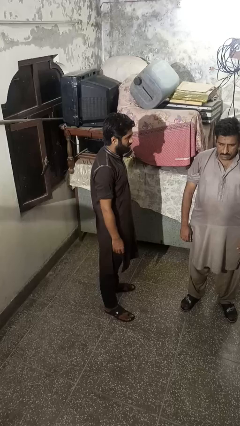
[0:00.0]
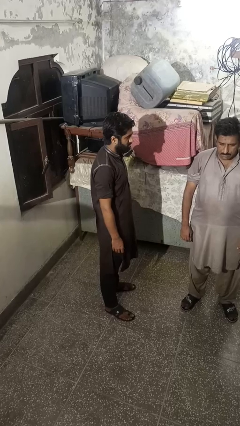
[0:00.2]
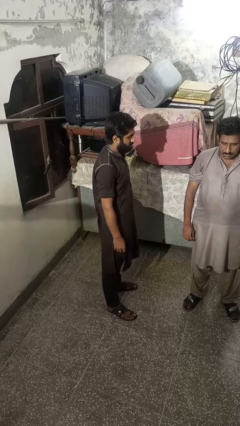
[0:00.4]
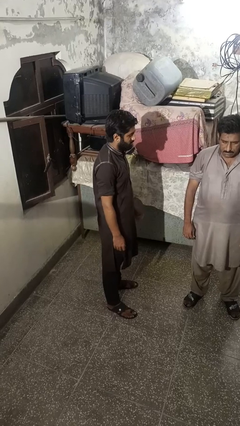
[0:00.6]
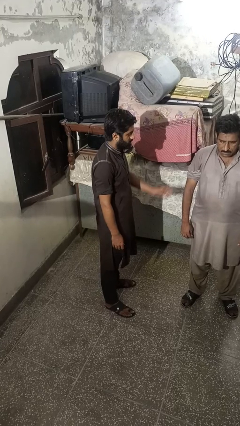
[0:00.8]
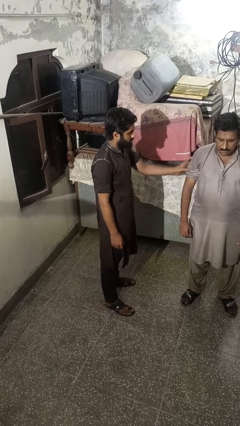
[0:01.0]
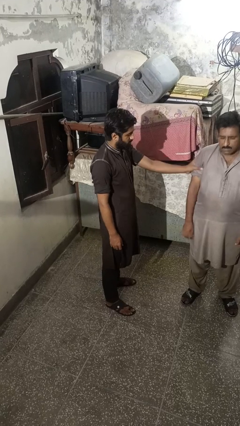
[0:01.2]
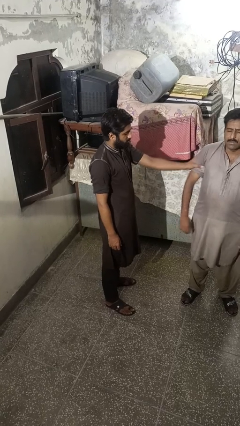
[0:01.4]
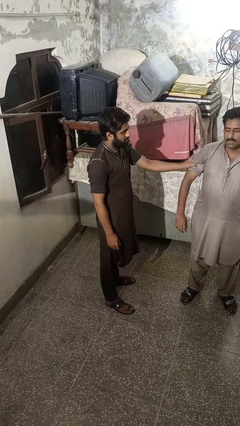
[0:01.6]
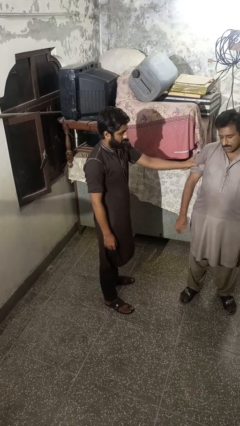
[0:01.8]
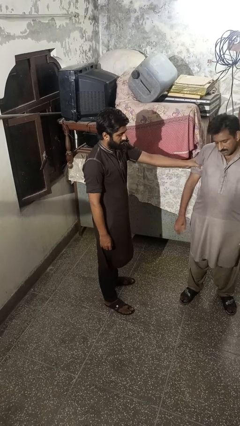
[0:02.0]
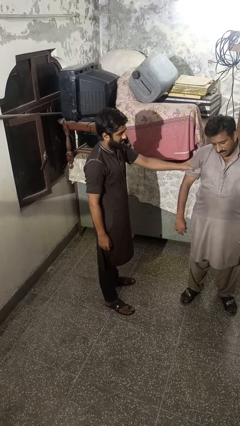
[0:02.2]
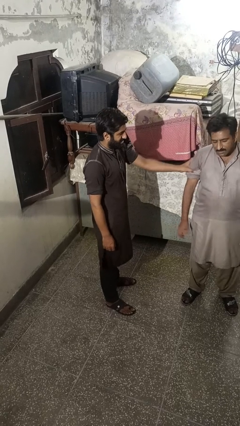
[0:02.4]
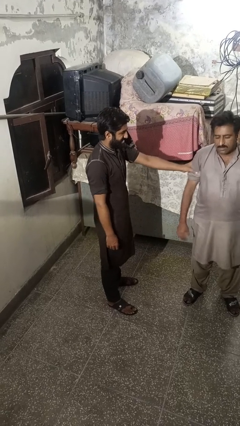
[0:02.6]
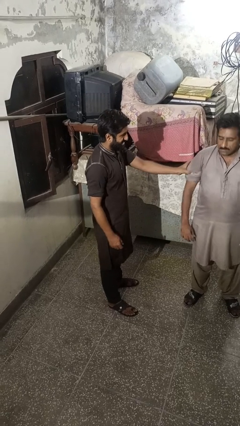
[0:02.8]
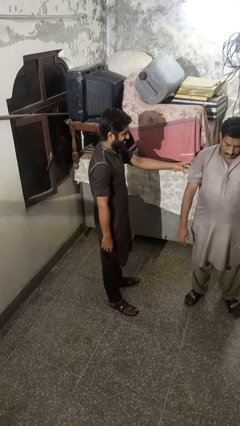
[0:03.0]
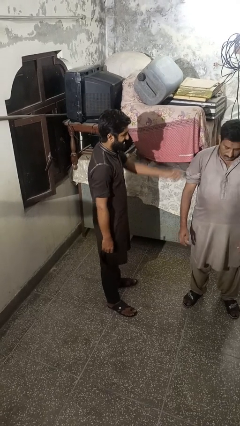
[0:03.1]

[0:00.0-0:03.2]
person grabs person by bicep

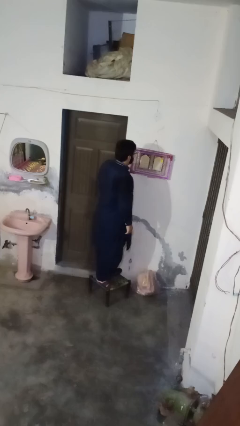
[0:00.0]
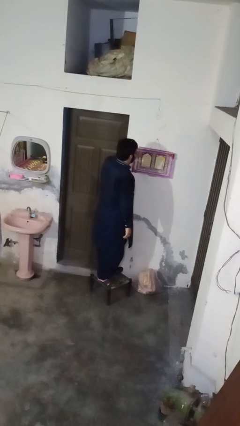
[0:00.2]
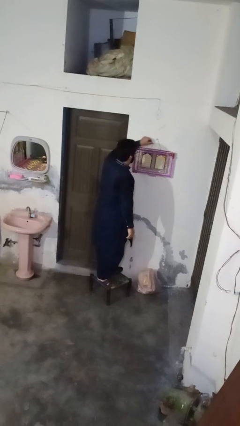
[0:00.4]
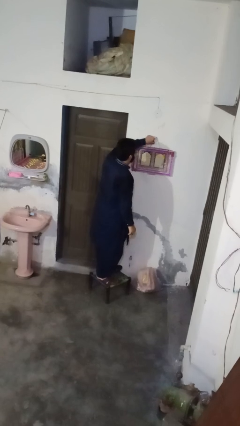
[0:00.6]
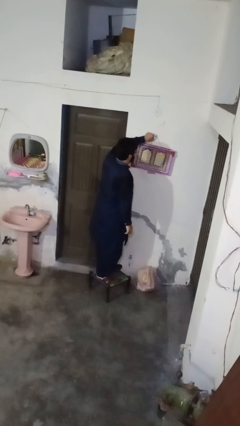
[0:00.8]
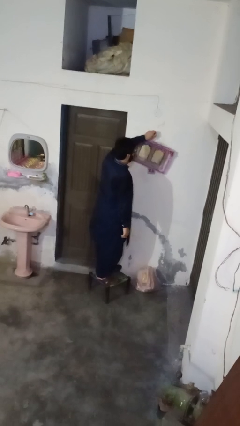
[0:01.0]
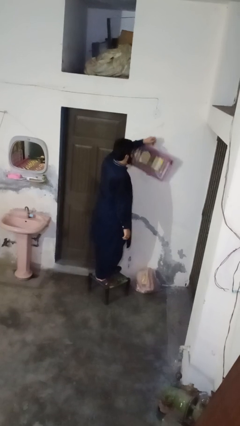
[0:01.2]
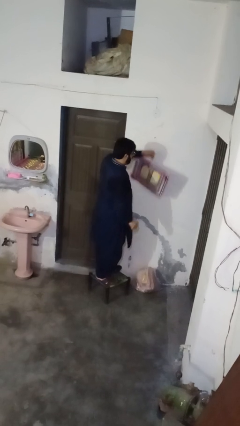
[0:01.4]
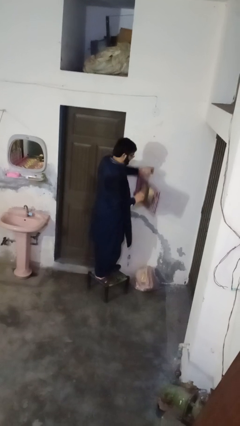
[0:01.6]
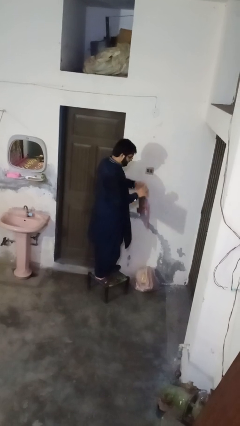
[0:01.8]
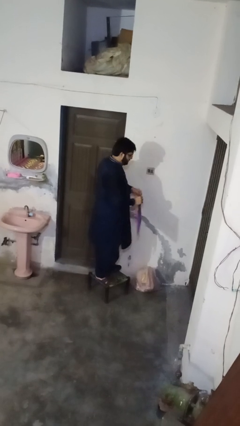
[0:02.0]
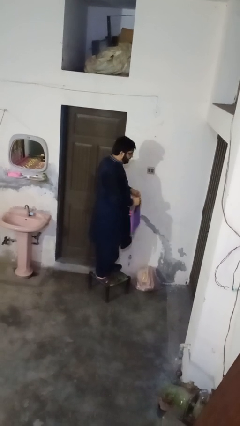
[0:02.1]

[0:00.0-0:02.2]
person takes down picture frame

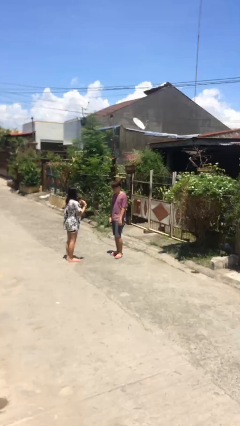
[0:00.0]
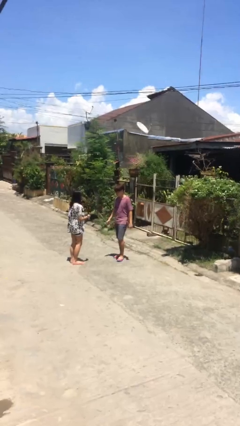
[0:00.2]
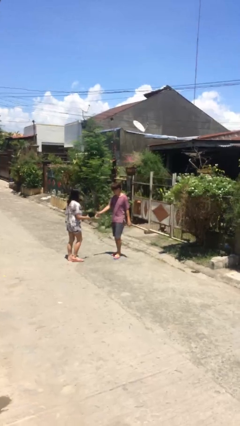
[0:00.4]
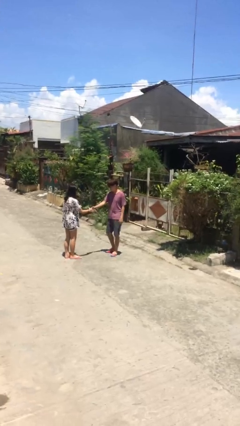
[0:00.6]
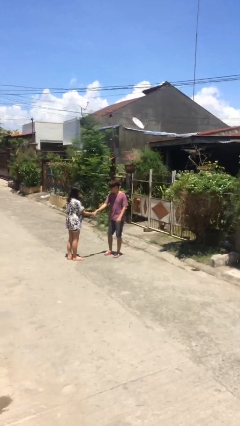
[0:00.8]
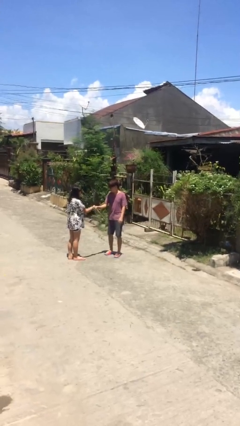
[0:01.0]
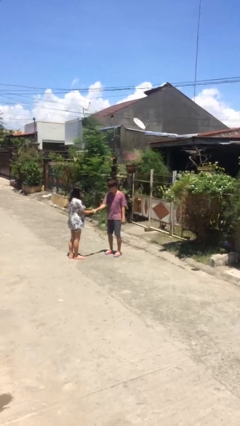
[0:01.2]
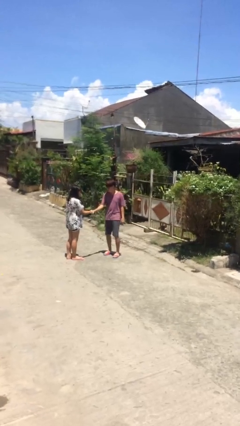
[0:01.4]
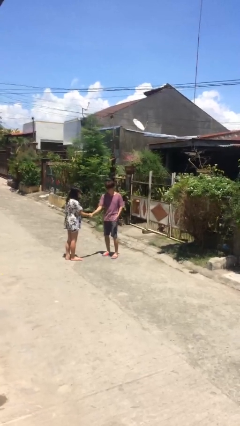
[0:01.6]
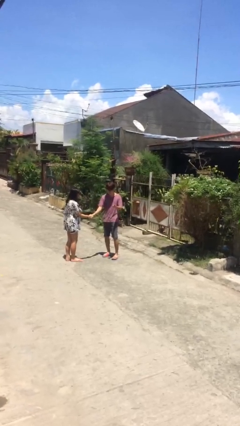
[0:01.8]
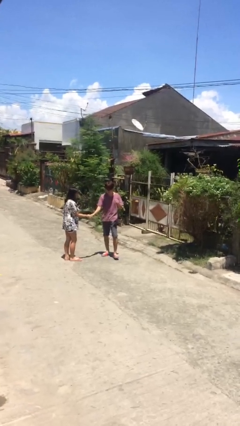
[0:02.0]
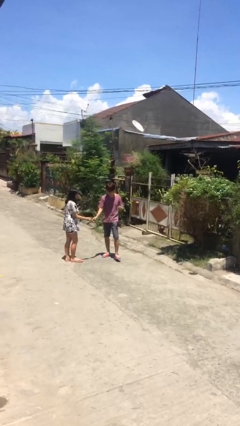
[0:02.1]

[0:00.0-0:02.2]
person shakes hand

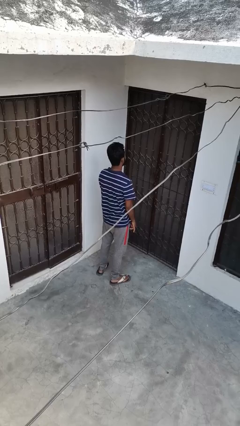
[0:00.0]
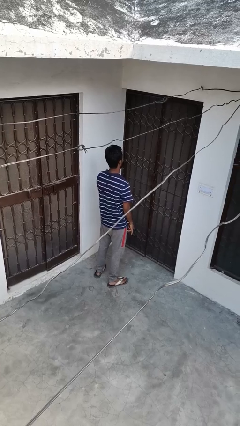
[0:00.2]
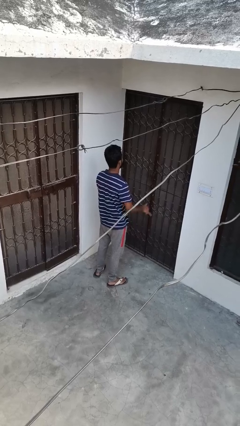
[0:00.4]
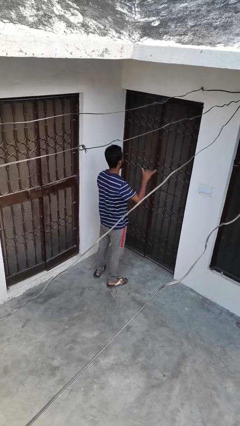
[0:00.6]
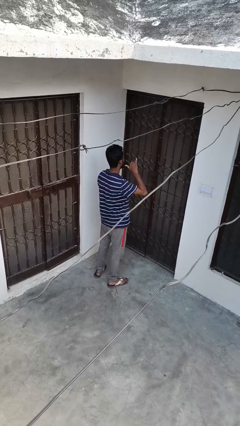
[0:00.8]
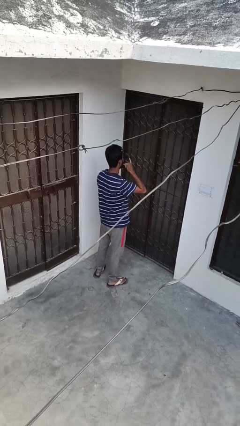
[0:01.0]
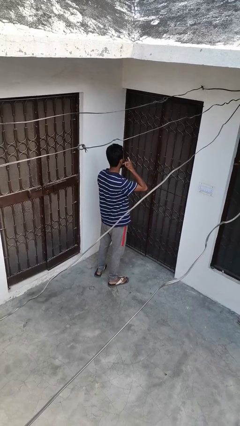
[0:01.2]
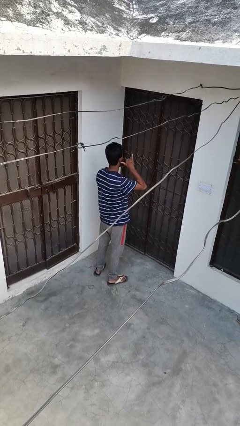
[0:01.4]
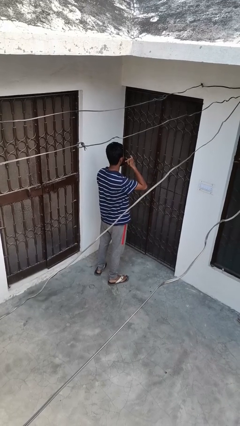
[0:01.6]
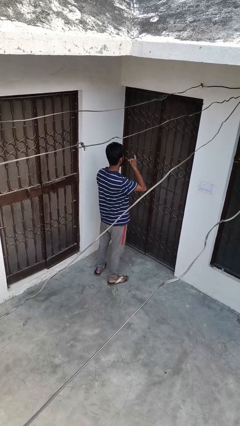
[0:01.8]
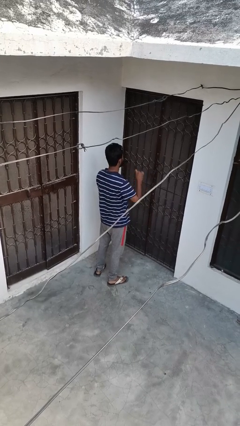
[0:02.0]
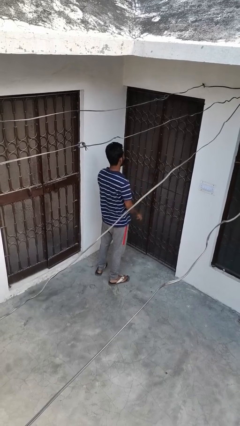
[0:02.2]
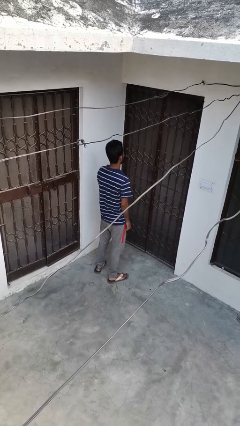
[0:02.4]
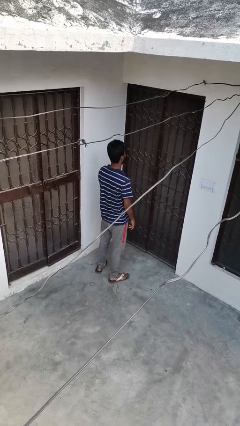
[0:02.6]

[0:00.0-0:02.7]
person gestures hang loose

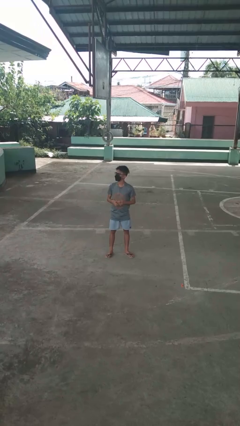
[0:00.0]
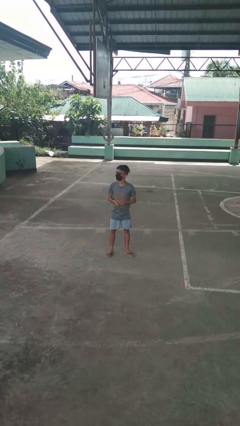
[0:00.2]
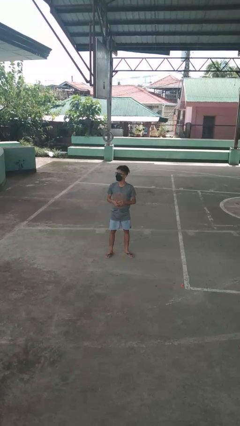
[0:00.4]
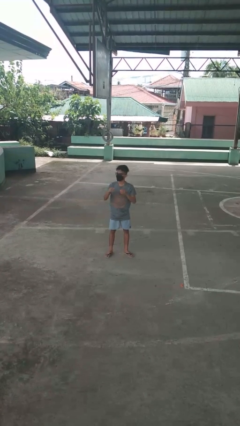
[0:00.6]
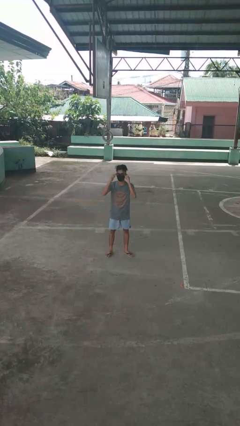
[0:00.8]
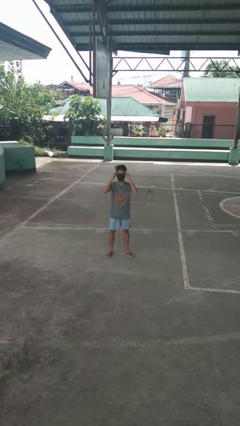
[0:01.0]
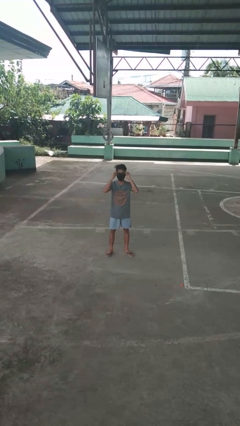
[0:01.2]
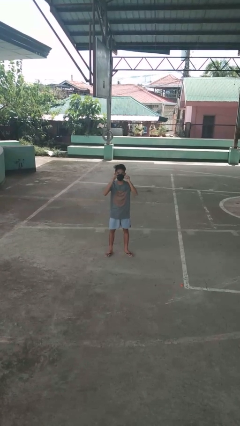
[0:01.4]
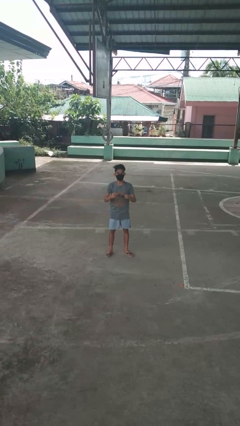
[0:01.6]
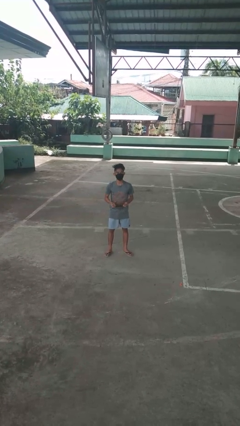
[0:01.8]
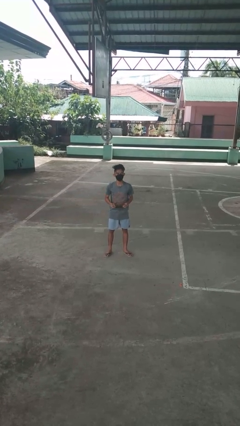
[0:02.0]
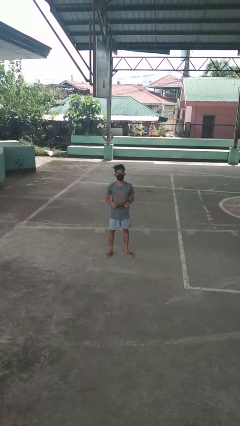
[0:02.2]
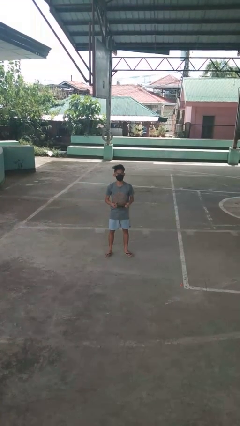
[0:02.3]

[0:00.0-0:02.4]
person takes off glasses

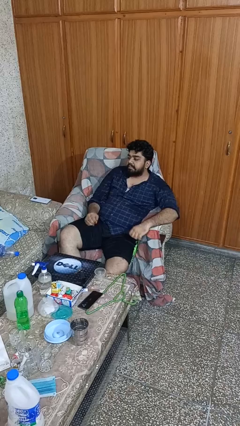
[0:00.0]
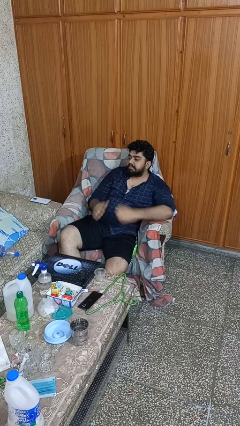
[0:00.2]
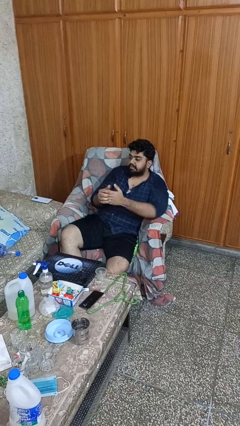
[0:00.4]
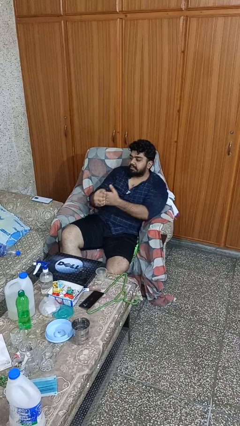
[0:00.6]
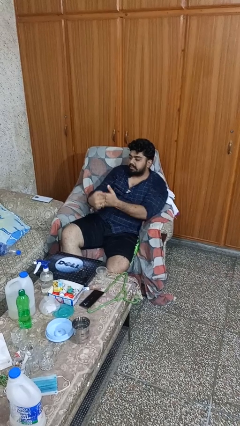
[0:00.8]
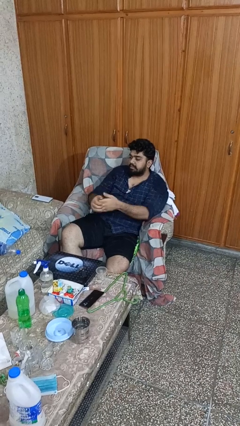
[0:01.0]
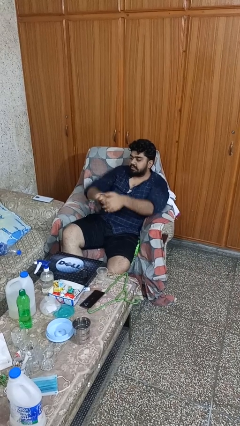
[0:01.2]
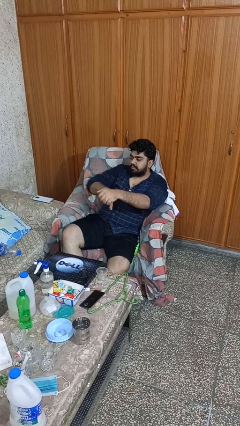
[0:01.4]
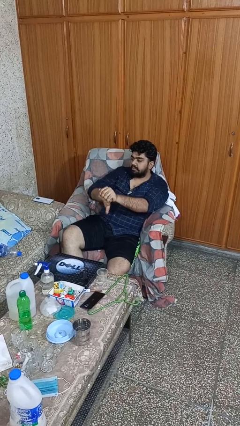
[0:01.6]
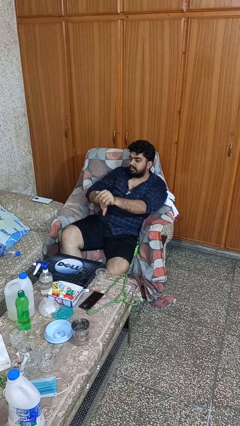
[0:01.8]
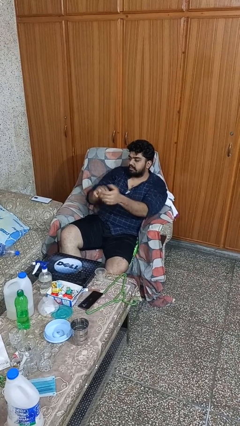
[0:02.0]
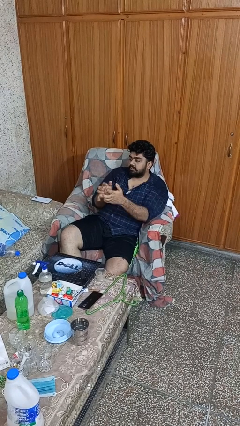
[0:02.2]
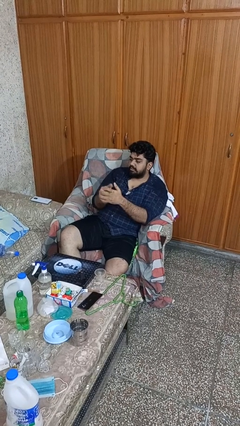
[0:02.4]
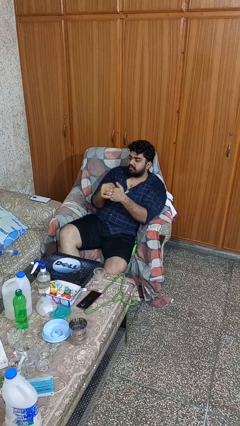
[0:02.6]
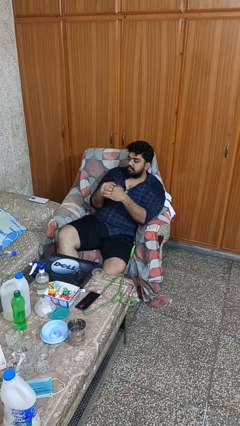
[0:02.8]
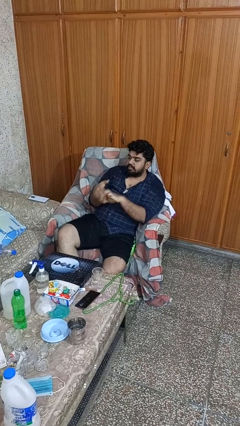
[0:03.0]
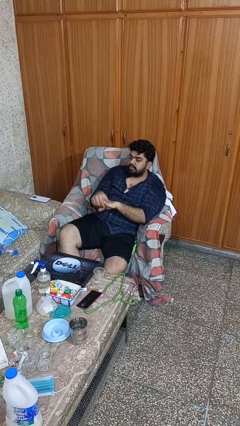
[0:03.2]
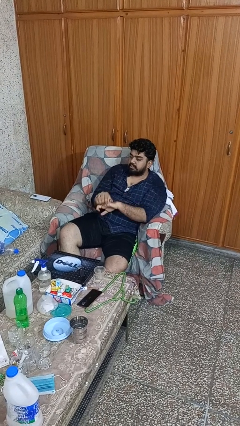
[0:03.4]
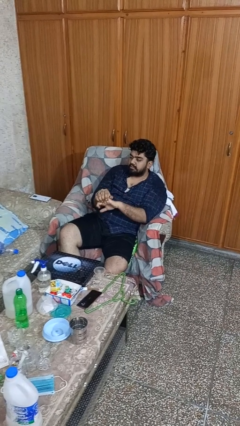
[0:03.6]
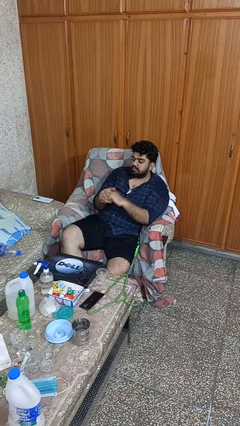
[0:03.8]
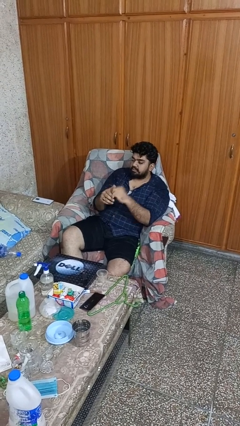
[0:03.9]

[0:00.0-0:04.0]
person cracks knuckles

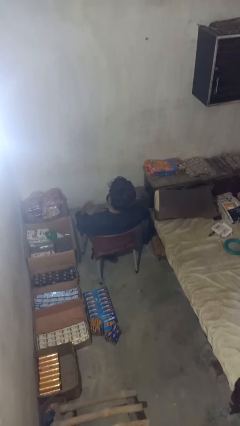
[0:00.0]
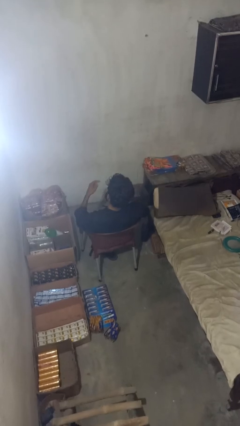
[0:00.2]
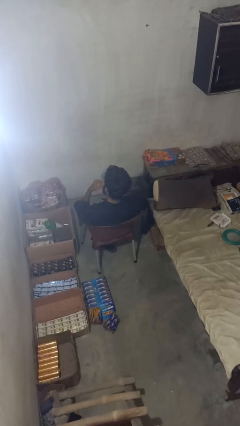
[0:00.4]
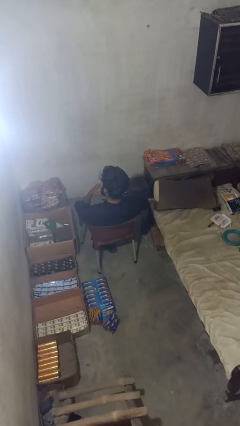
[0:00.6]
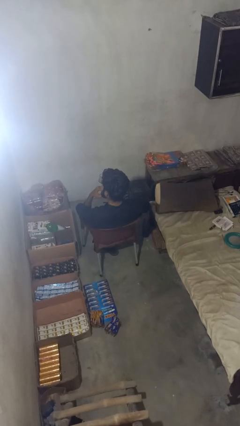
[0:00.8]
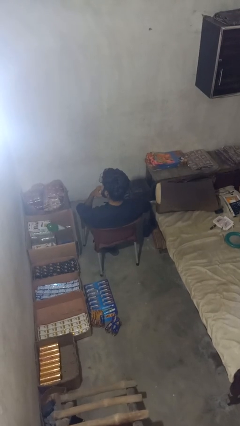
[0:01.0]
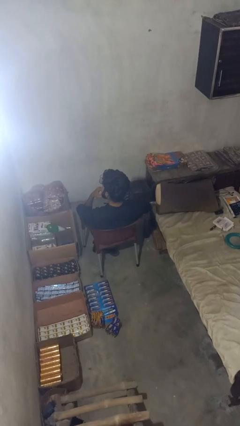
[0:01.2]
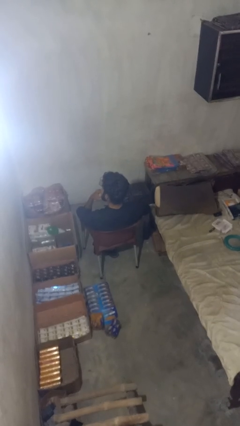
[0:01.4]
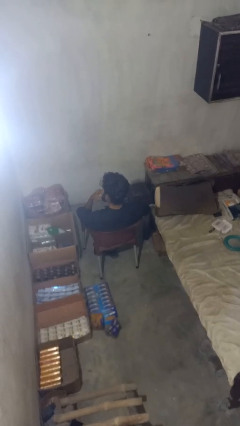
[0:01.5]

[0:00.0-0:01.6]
person licks fingers
